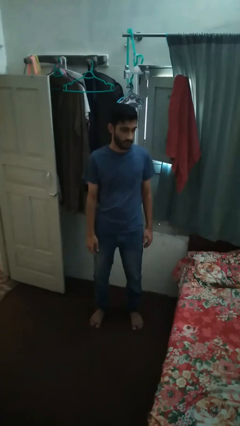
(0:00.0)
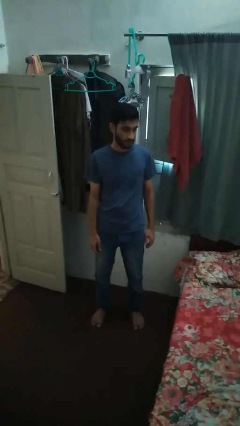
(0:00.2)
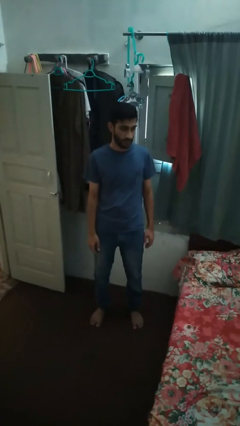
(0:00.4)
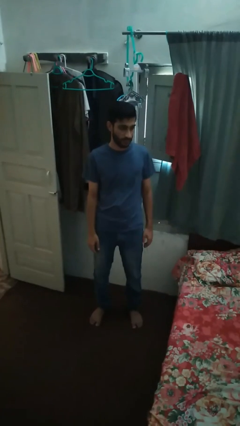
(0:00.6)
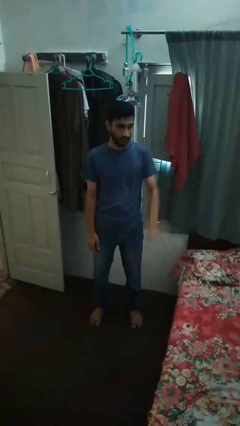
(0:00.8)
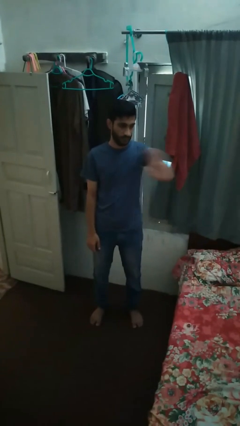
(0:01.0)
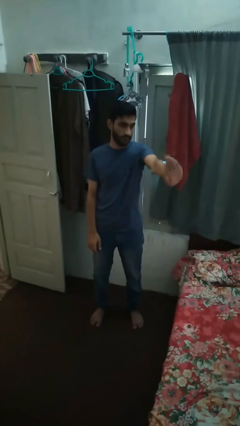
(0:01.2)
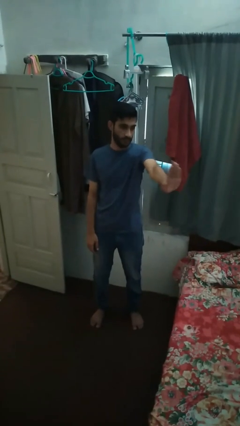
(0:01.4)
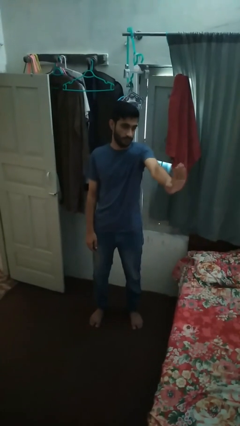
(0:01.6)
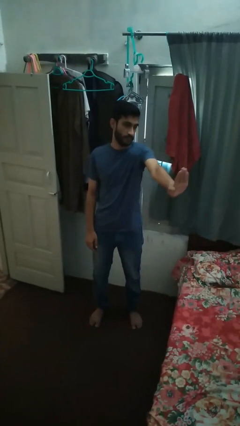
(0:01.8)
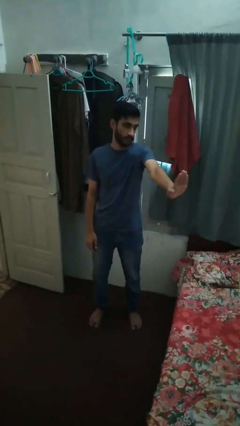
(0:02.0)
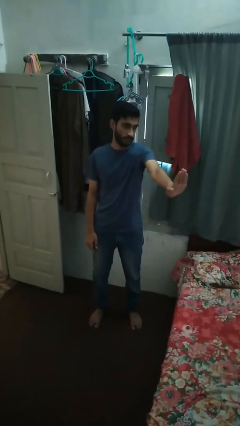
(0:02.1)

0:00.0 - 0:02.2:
person gestures stop

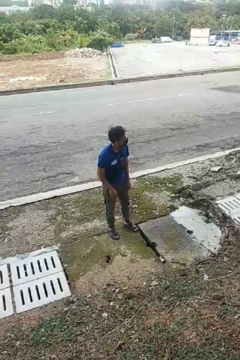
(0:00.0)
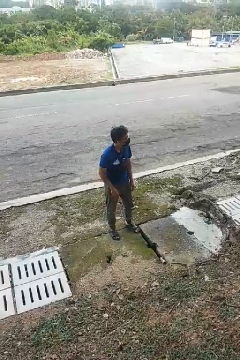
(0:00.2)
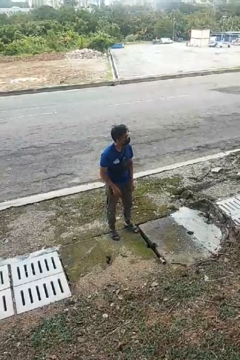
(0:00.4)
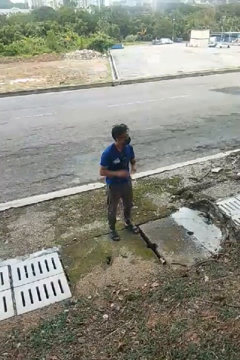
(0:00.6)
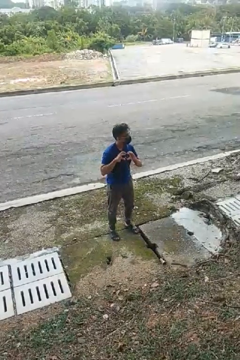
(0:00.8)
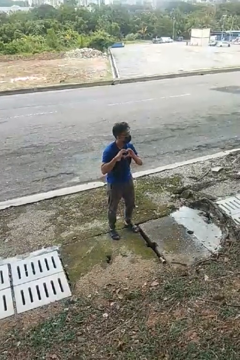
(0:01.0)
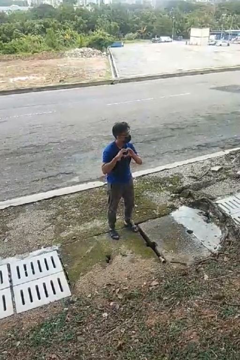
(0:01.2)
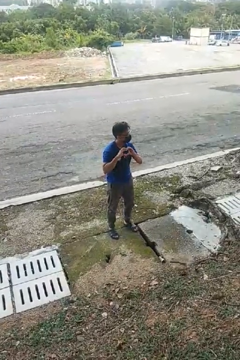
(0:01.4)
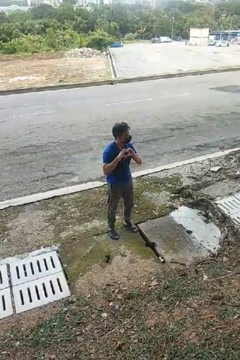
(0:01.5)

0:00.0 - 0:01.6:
person gestures heart

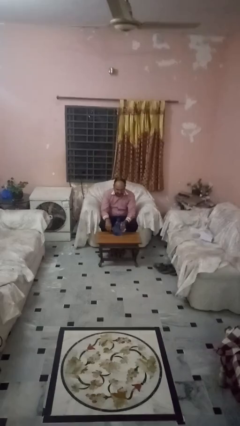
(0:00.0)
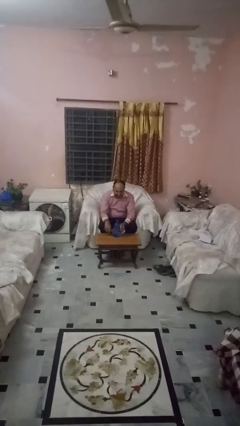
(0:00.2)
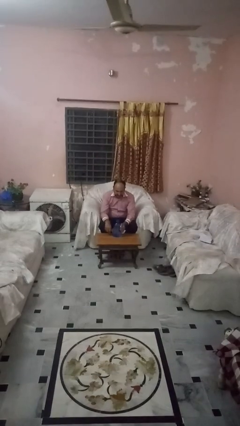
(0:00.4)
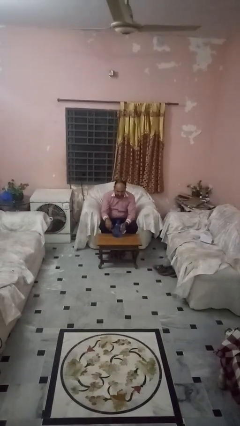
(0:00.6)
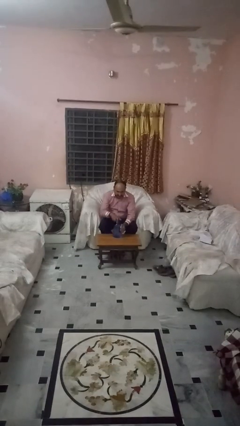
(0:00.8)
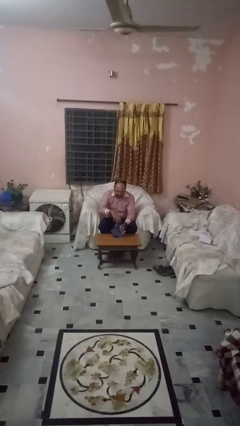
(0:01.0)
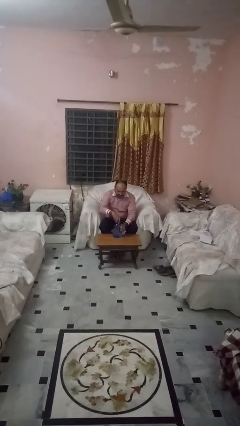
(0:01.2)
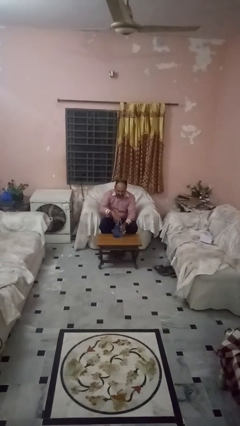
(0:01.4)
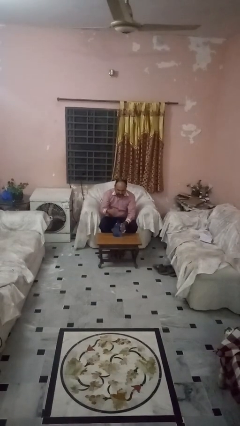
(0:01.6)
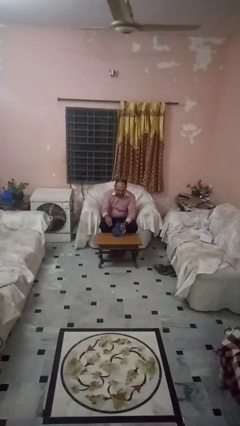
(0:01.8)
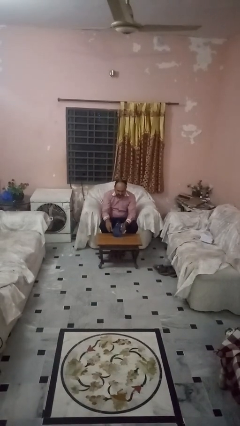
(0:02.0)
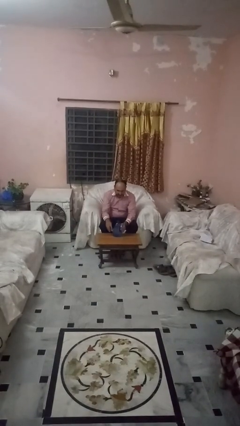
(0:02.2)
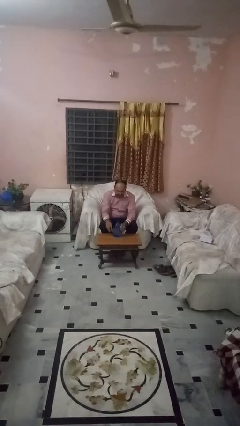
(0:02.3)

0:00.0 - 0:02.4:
person unscrews lid from bottle

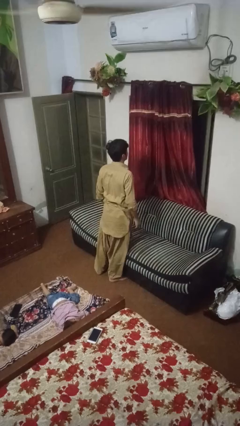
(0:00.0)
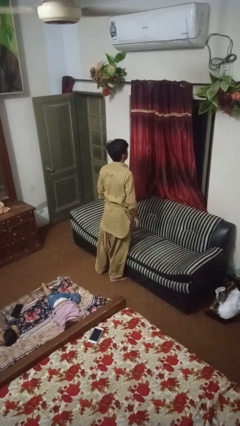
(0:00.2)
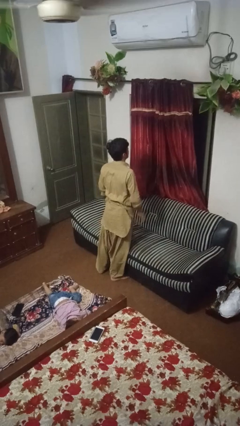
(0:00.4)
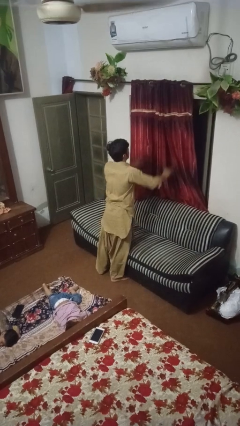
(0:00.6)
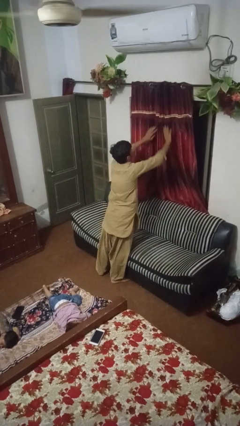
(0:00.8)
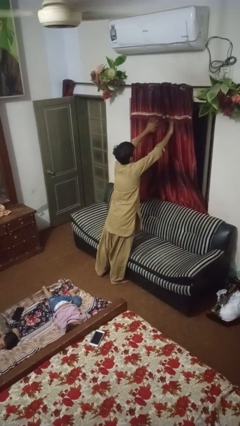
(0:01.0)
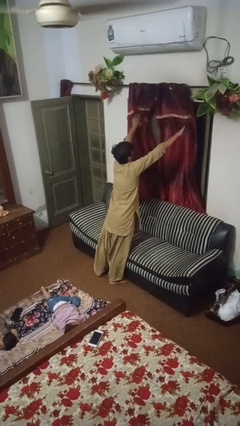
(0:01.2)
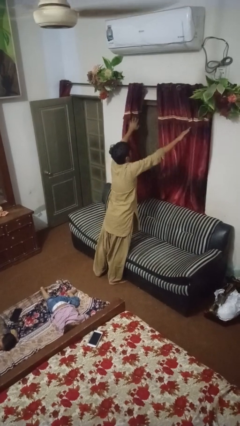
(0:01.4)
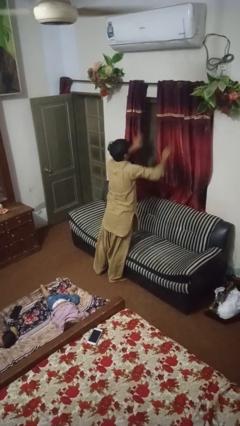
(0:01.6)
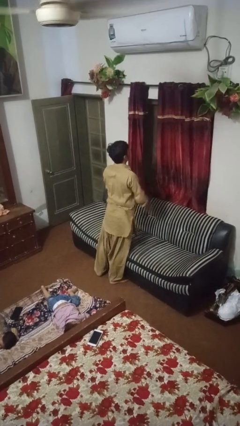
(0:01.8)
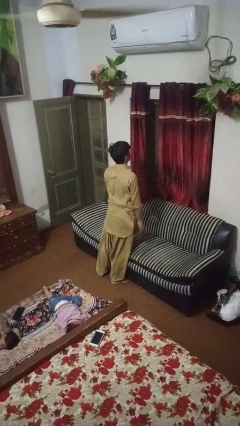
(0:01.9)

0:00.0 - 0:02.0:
person opens curtains

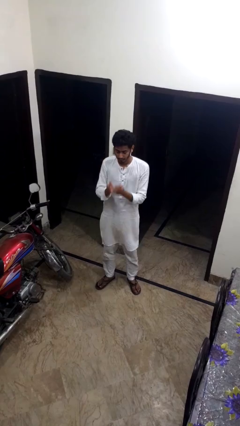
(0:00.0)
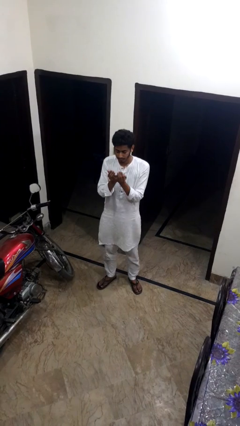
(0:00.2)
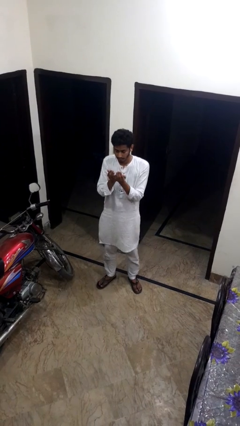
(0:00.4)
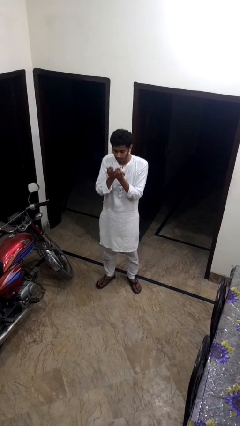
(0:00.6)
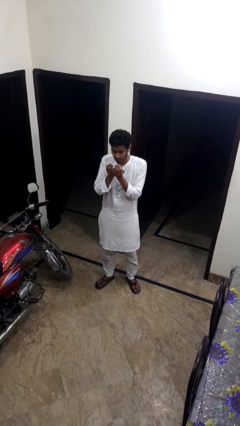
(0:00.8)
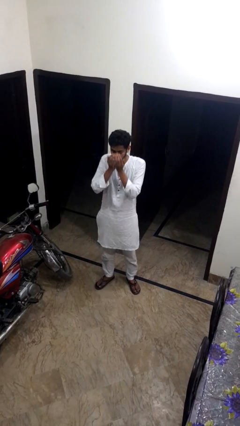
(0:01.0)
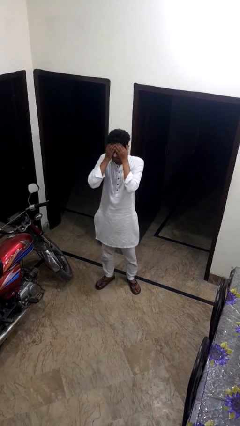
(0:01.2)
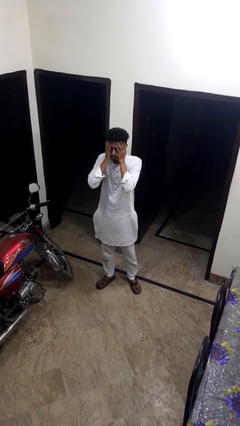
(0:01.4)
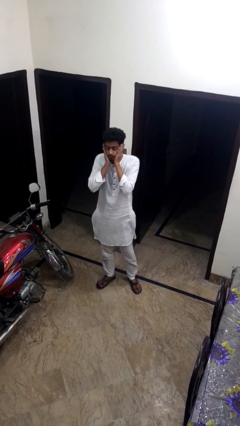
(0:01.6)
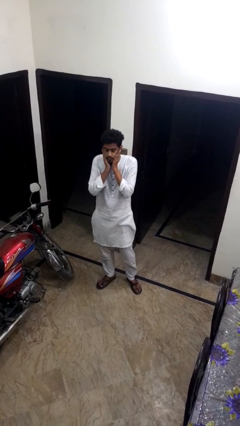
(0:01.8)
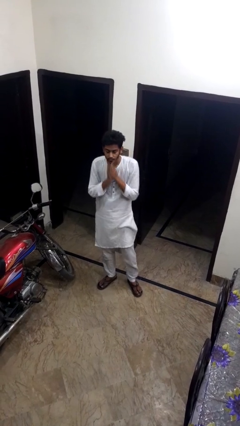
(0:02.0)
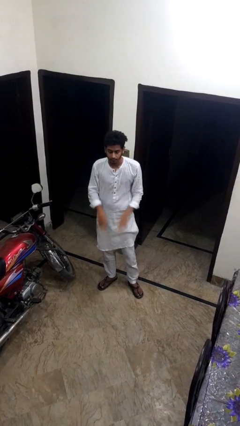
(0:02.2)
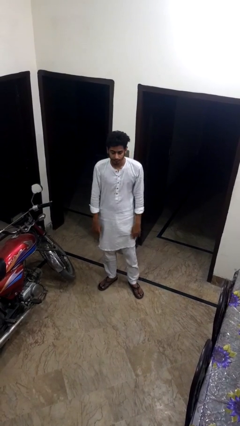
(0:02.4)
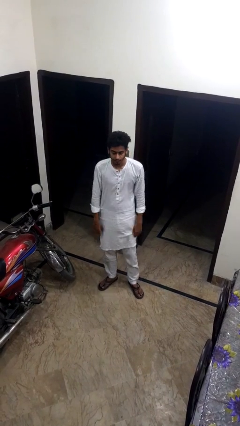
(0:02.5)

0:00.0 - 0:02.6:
person prays

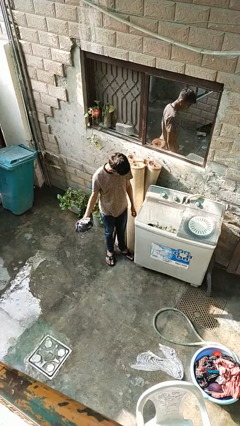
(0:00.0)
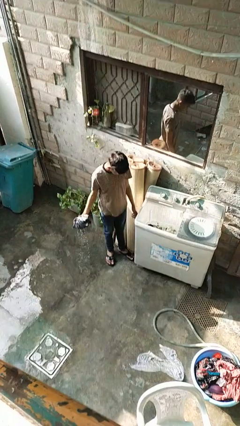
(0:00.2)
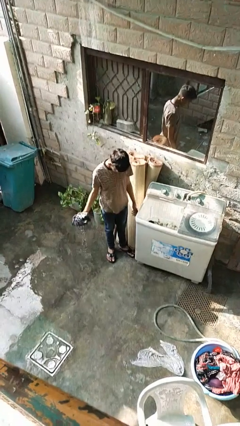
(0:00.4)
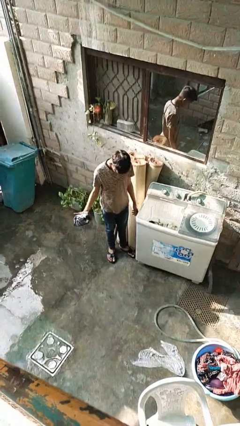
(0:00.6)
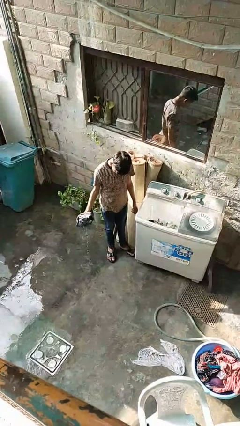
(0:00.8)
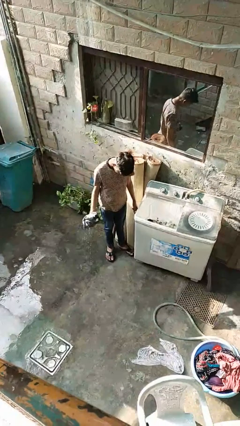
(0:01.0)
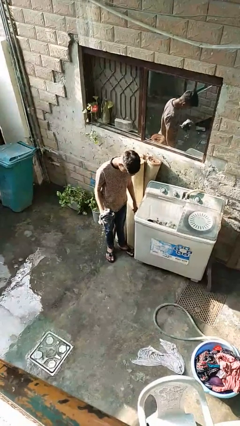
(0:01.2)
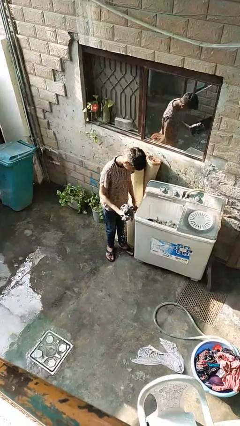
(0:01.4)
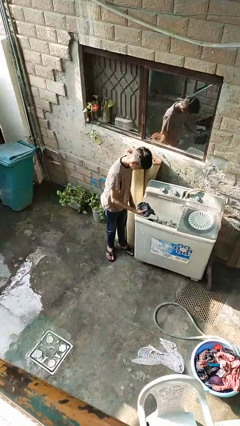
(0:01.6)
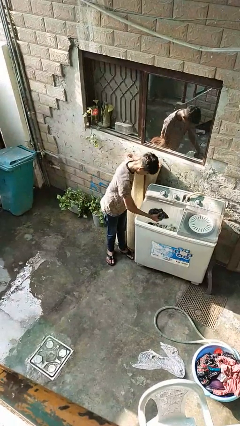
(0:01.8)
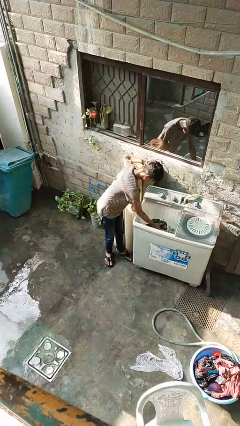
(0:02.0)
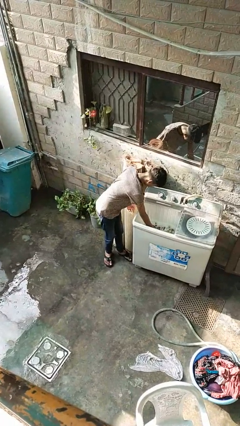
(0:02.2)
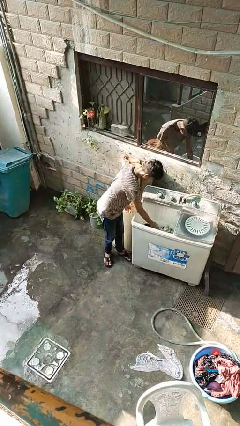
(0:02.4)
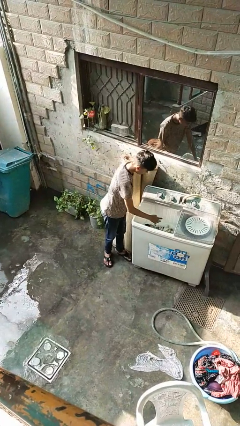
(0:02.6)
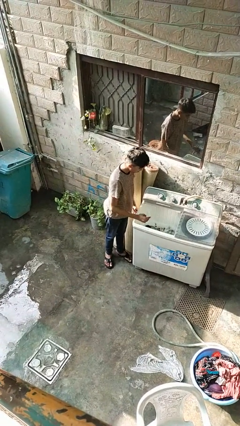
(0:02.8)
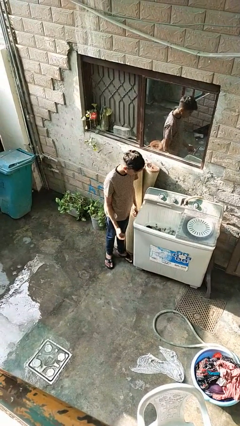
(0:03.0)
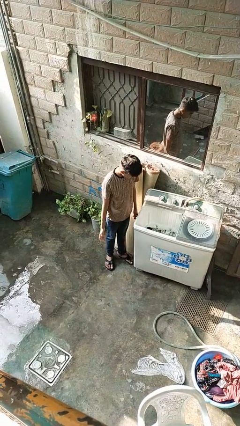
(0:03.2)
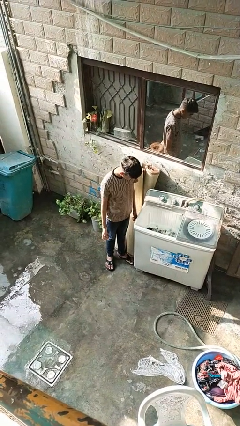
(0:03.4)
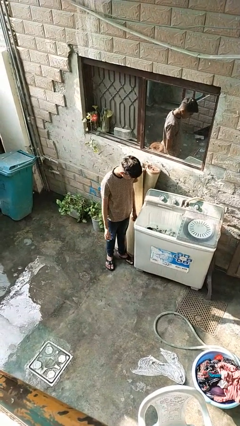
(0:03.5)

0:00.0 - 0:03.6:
person loads clotheswasher

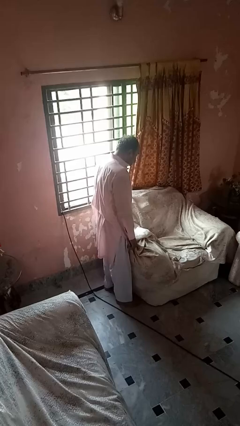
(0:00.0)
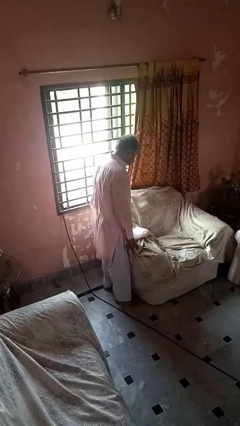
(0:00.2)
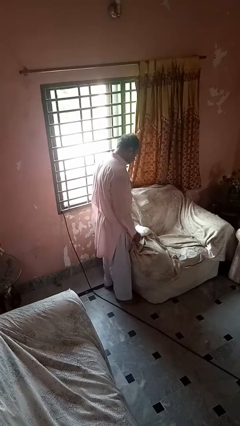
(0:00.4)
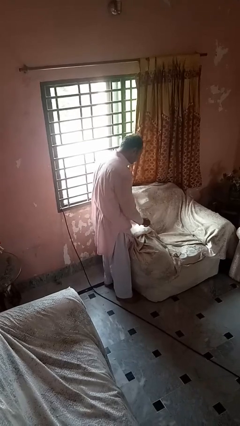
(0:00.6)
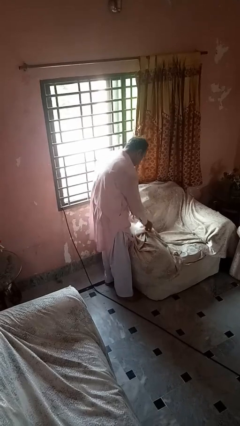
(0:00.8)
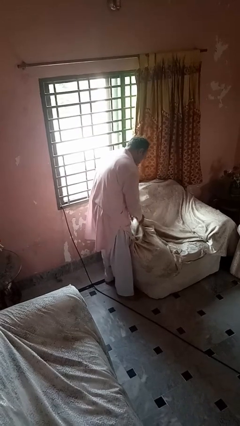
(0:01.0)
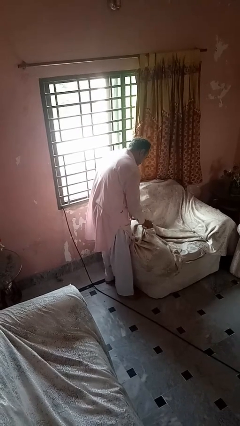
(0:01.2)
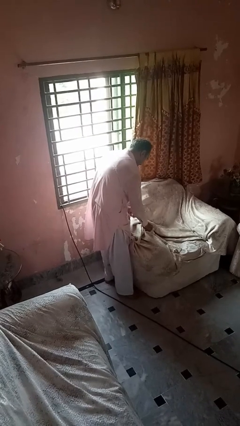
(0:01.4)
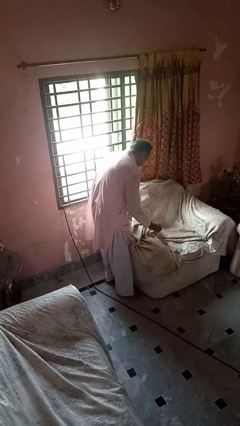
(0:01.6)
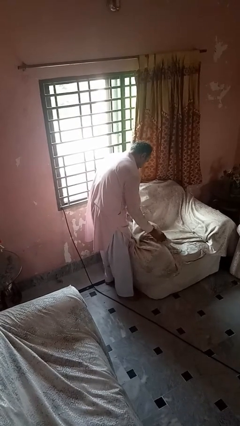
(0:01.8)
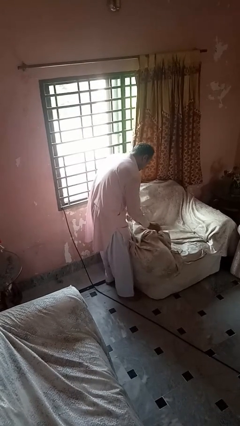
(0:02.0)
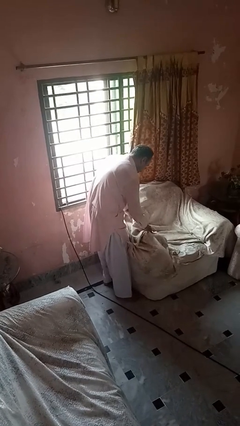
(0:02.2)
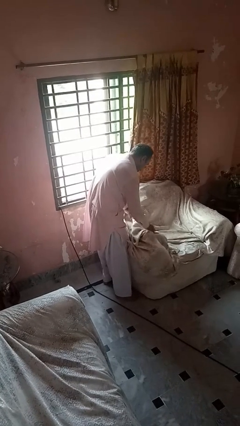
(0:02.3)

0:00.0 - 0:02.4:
person searches in couch

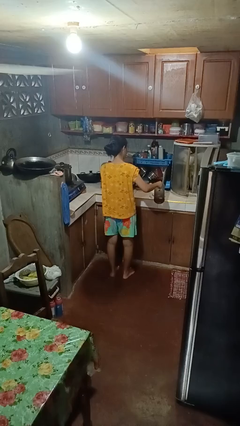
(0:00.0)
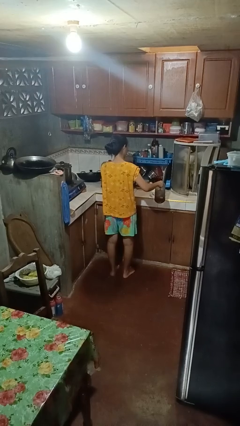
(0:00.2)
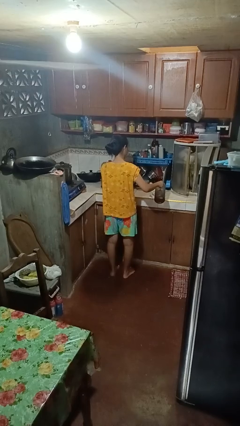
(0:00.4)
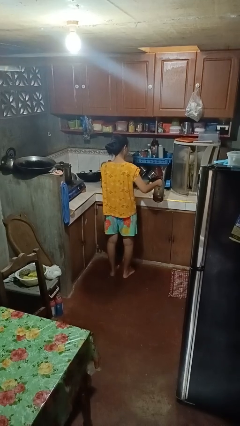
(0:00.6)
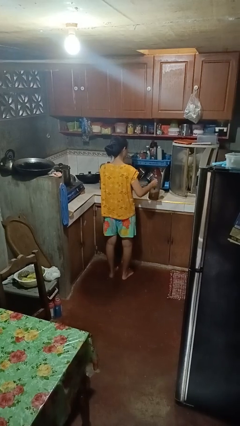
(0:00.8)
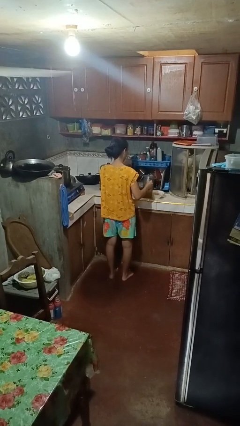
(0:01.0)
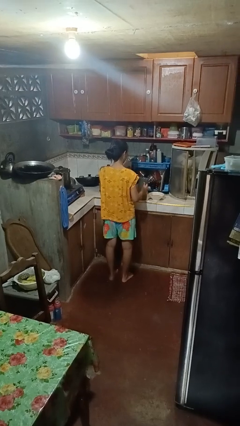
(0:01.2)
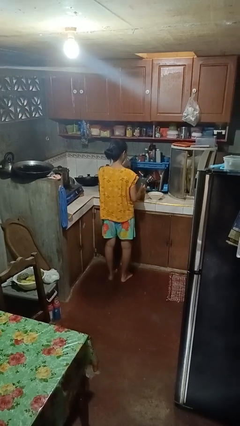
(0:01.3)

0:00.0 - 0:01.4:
person pours into bowl
